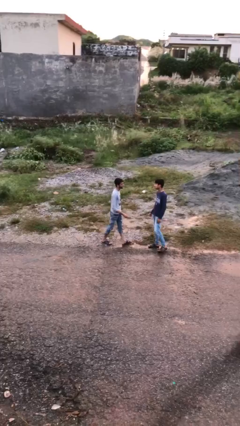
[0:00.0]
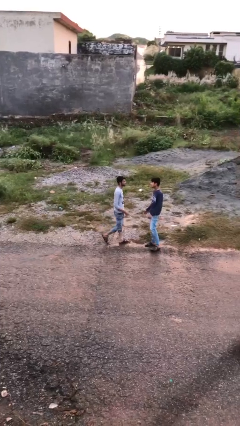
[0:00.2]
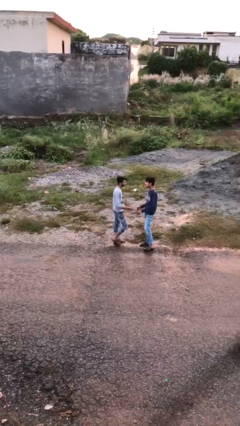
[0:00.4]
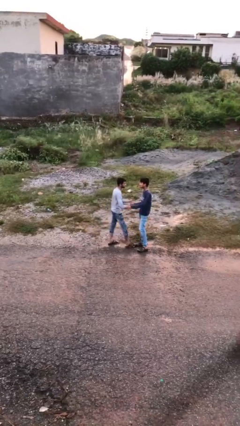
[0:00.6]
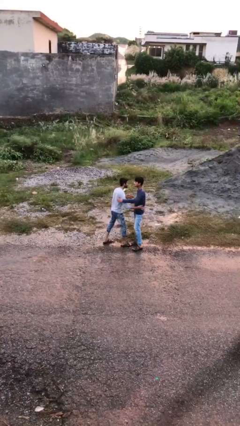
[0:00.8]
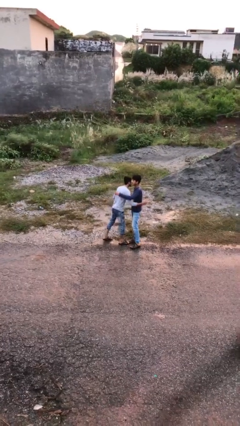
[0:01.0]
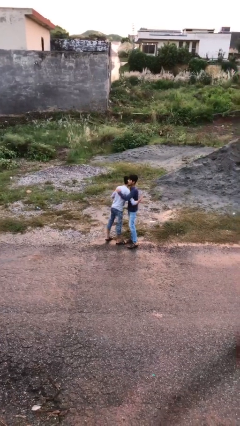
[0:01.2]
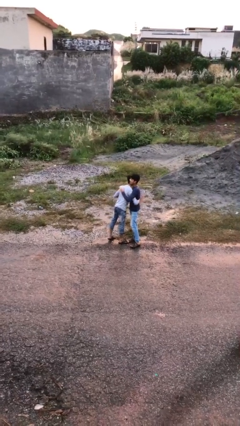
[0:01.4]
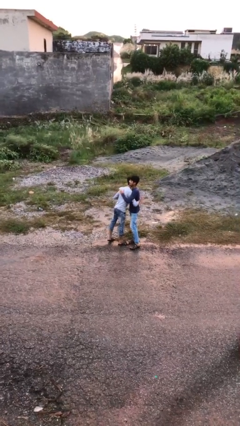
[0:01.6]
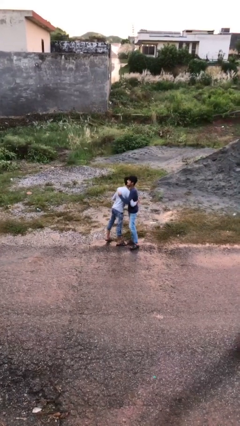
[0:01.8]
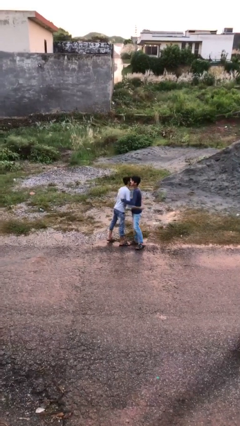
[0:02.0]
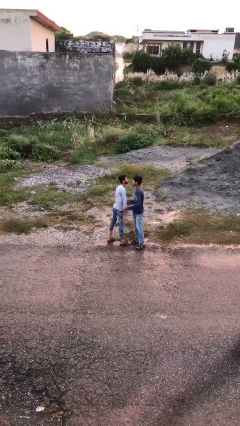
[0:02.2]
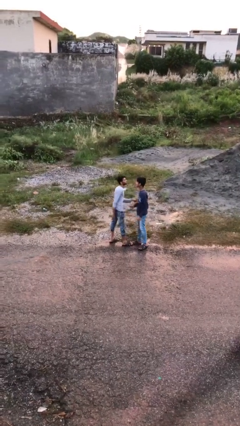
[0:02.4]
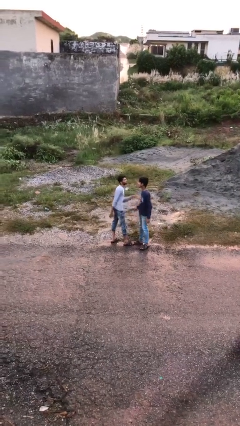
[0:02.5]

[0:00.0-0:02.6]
person embraces person

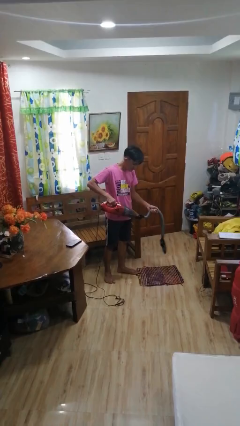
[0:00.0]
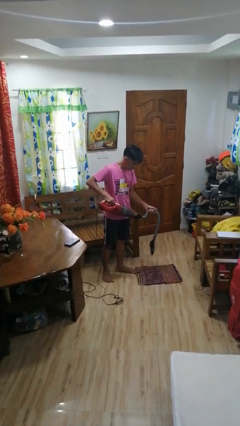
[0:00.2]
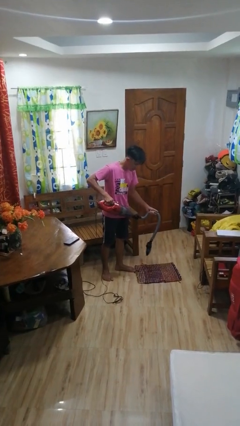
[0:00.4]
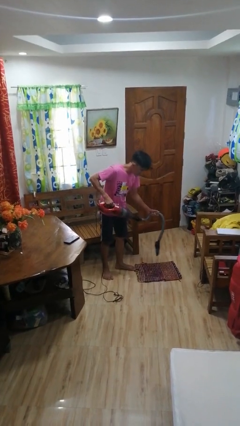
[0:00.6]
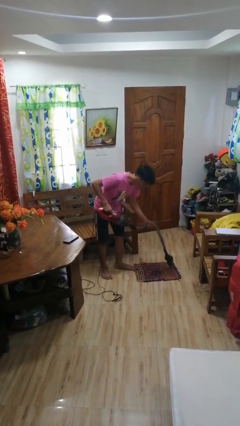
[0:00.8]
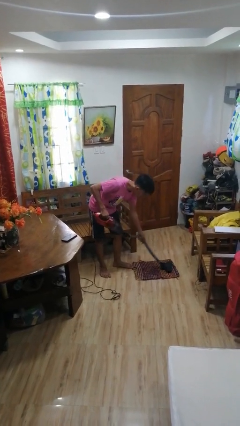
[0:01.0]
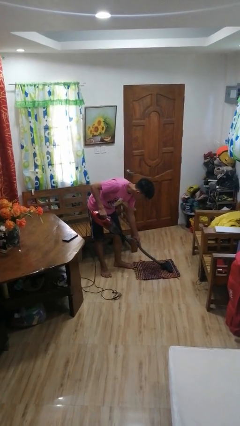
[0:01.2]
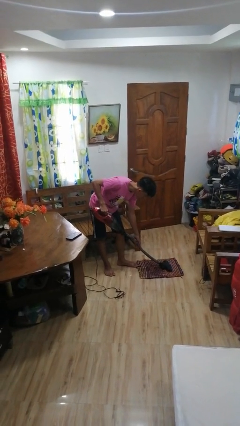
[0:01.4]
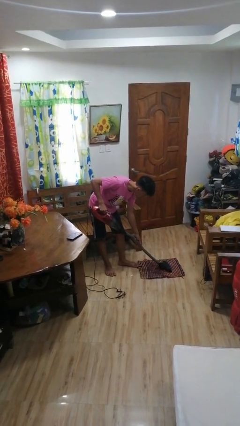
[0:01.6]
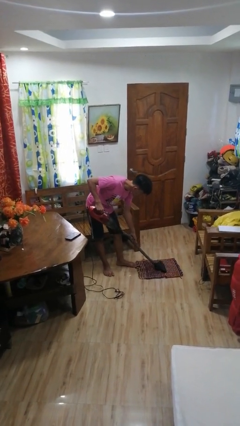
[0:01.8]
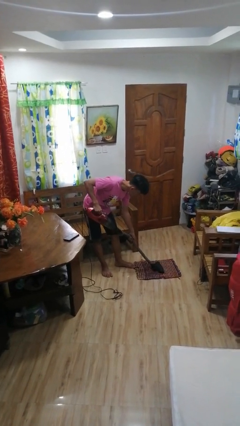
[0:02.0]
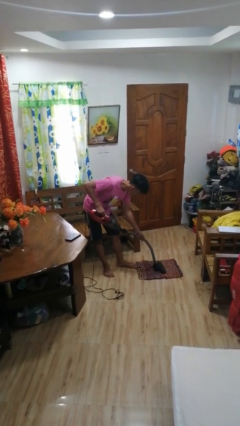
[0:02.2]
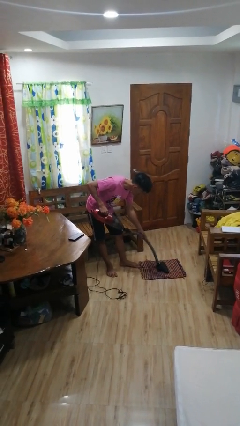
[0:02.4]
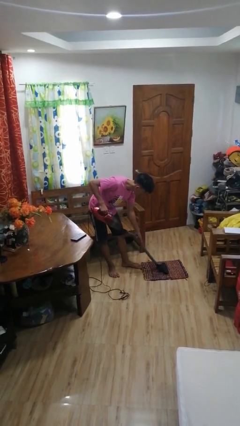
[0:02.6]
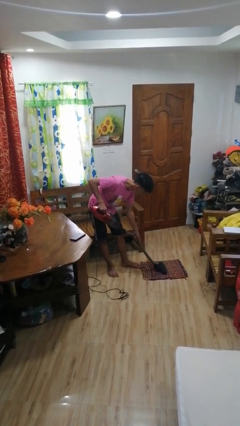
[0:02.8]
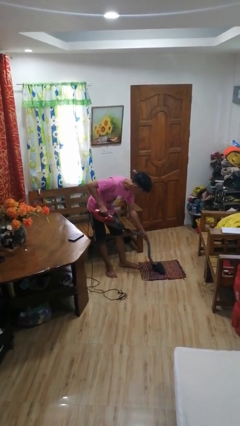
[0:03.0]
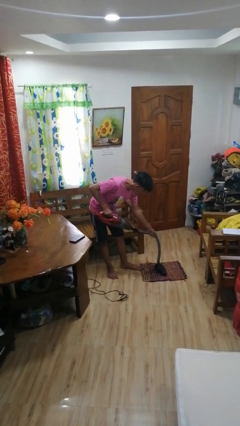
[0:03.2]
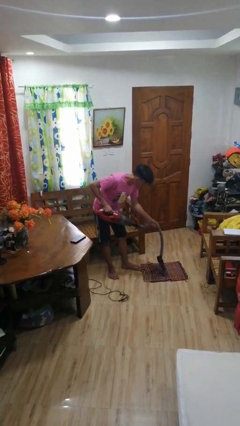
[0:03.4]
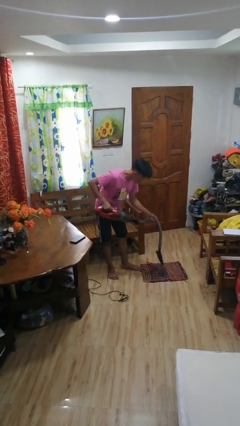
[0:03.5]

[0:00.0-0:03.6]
person vacuums carpet

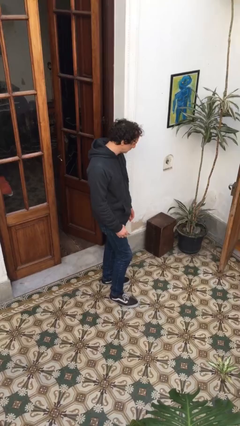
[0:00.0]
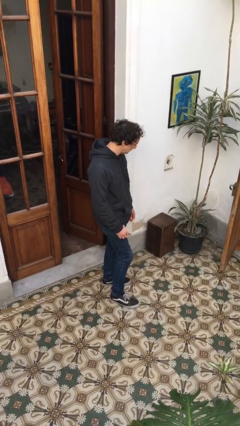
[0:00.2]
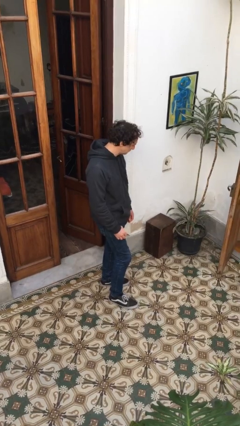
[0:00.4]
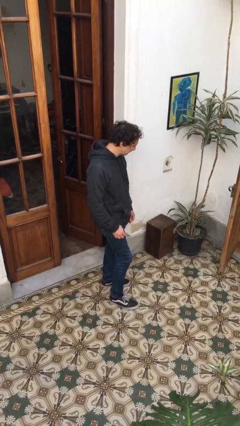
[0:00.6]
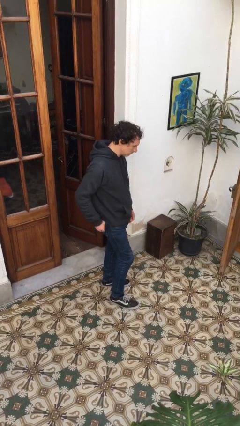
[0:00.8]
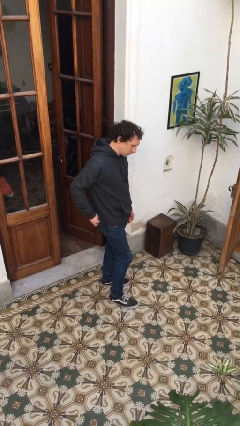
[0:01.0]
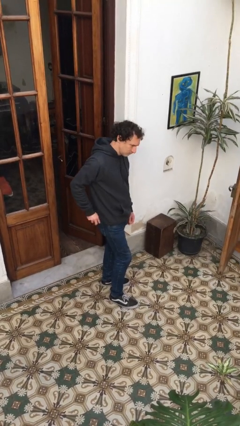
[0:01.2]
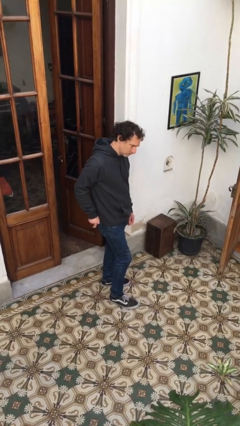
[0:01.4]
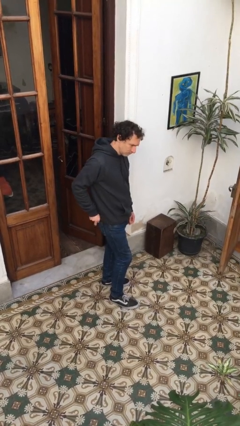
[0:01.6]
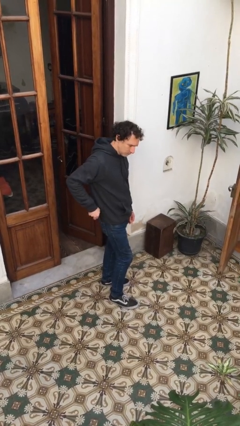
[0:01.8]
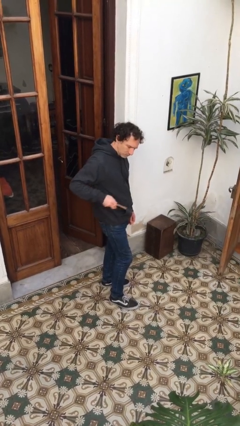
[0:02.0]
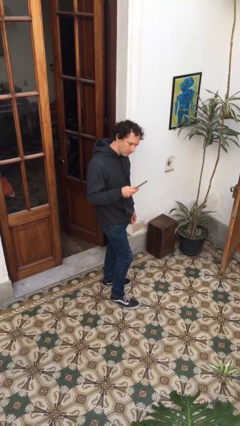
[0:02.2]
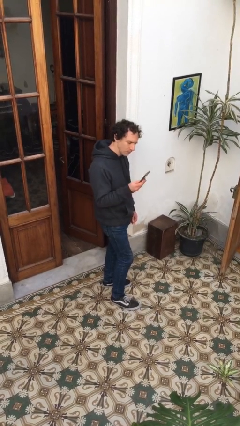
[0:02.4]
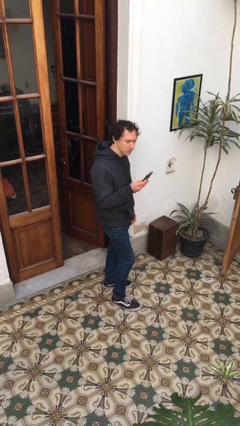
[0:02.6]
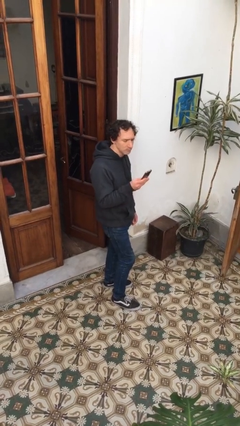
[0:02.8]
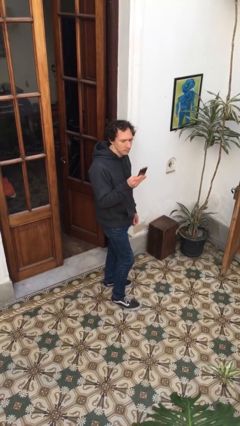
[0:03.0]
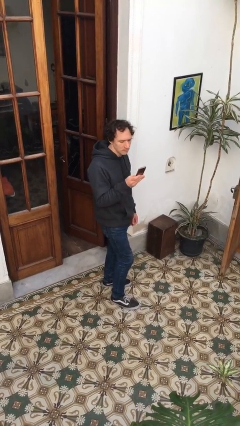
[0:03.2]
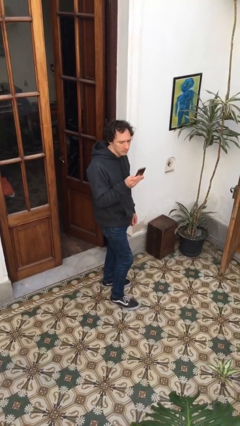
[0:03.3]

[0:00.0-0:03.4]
person takes phone from pocket

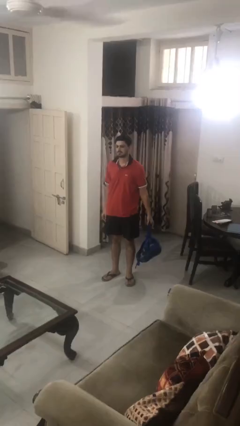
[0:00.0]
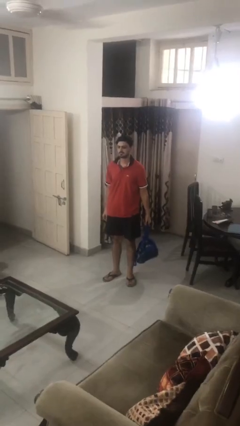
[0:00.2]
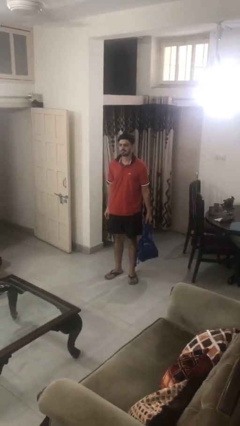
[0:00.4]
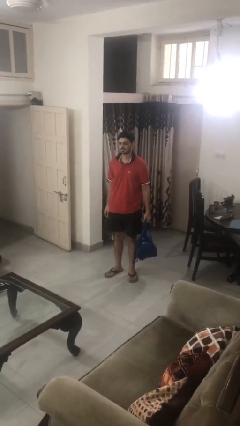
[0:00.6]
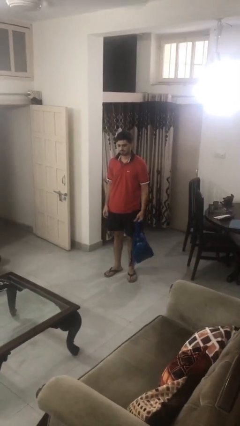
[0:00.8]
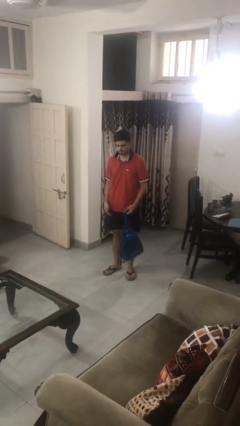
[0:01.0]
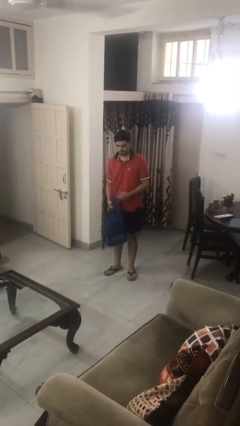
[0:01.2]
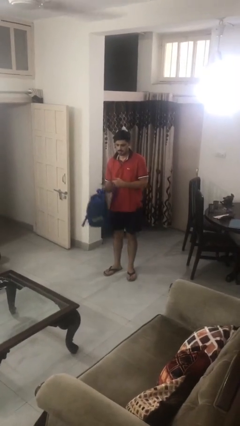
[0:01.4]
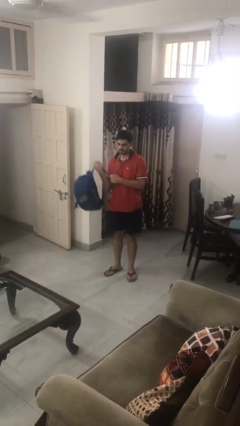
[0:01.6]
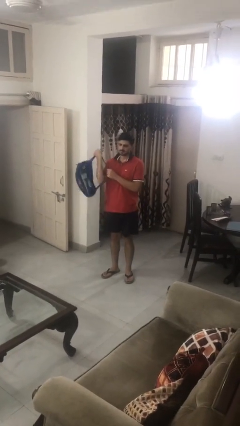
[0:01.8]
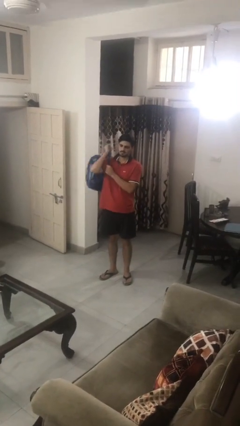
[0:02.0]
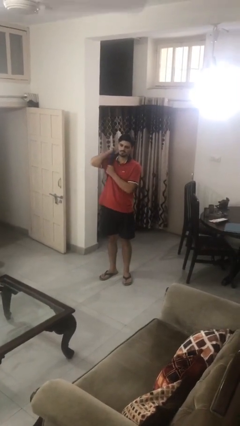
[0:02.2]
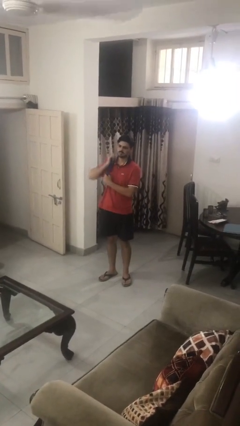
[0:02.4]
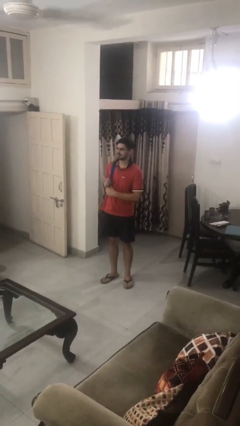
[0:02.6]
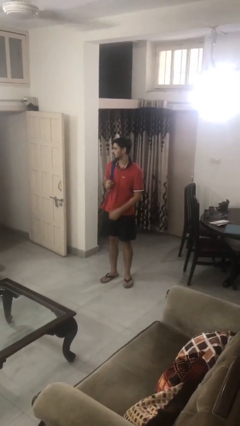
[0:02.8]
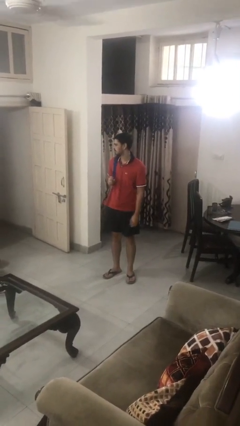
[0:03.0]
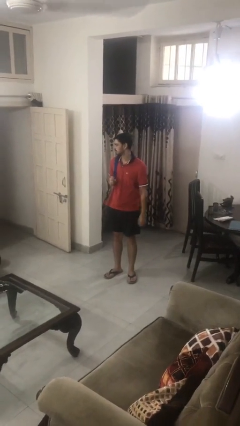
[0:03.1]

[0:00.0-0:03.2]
person puts on backpack

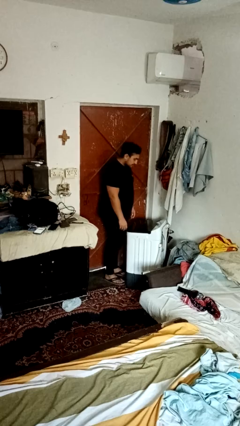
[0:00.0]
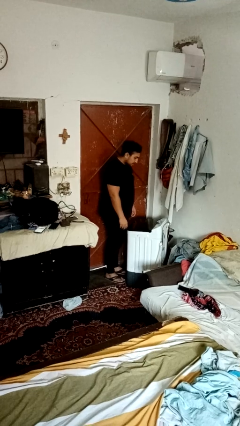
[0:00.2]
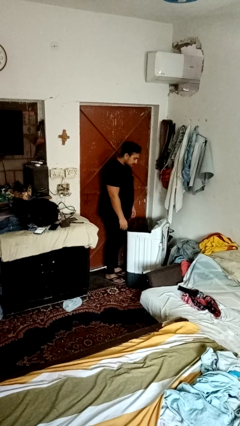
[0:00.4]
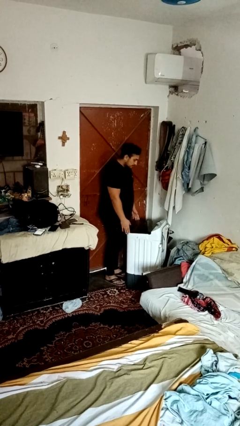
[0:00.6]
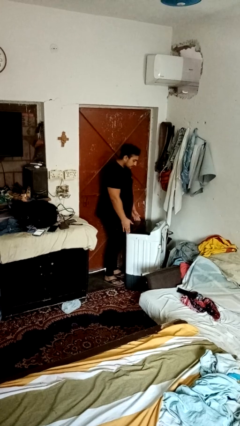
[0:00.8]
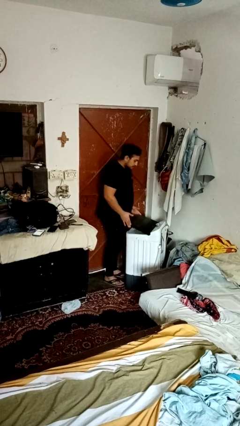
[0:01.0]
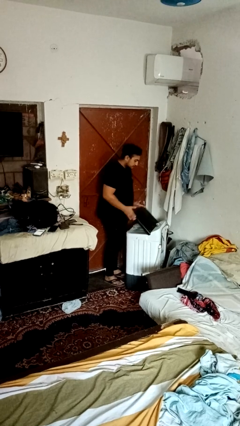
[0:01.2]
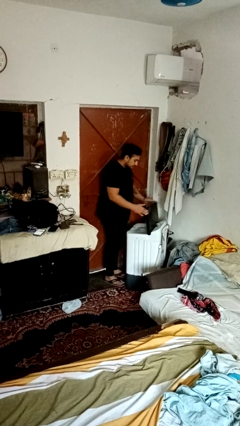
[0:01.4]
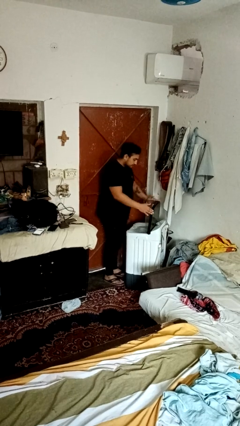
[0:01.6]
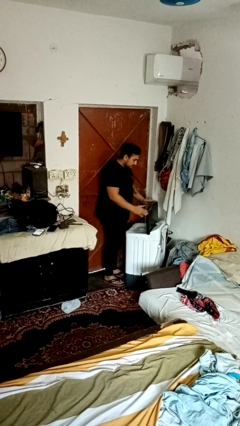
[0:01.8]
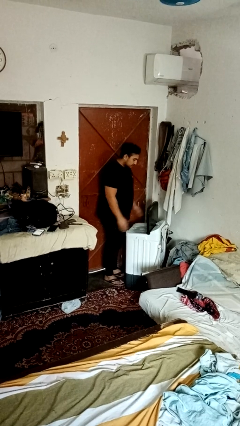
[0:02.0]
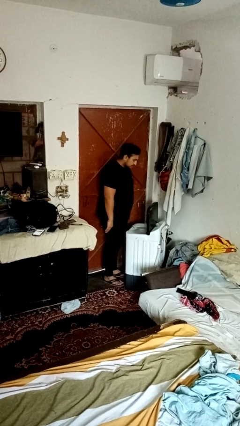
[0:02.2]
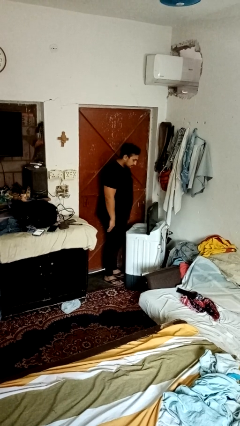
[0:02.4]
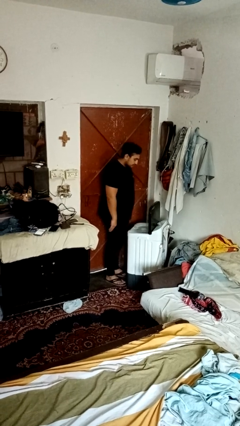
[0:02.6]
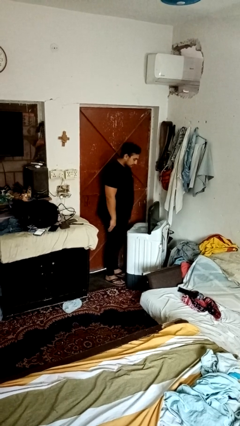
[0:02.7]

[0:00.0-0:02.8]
person opens clothes washer

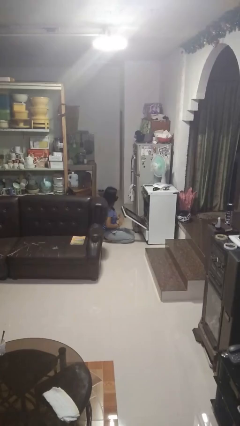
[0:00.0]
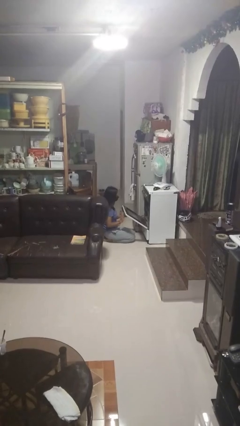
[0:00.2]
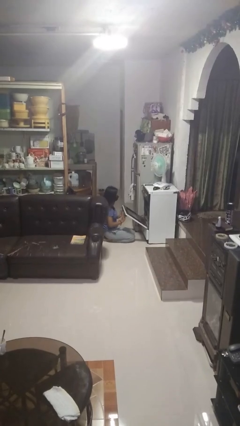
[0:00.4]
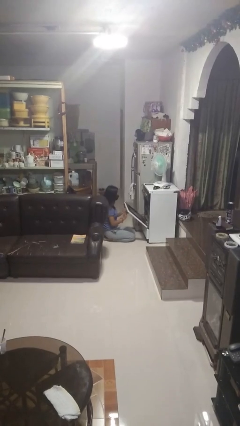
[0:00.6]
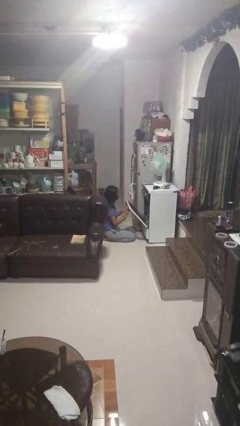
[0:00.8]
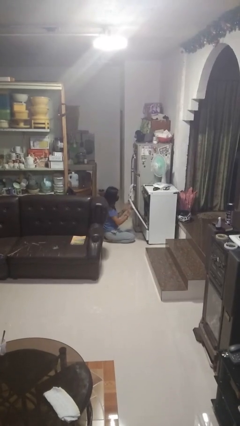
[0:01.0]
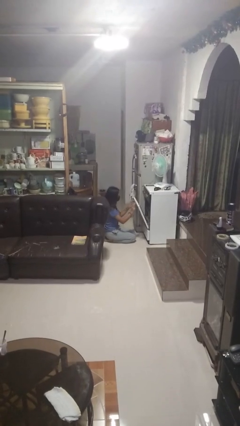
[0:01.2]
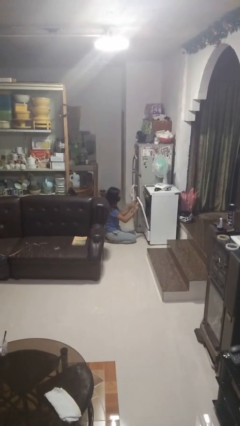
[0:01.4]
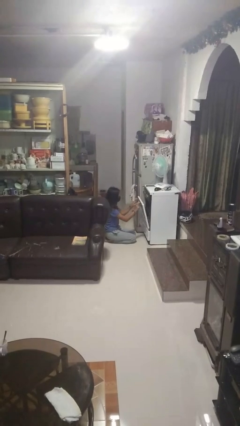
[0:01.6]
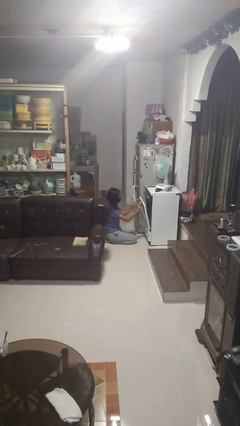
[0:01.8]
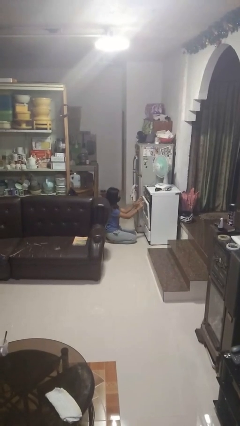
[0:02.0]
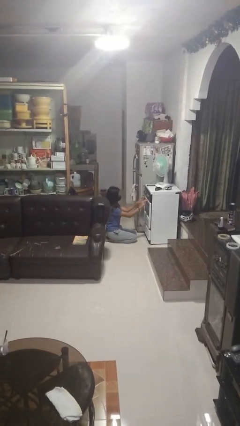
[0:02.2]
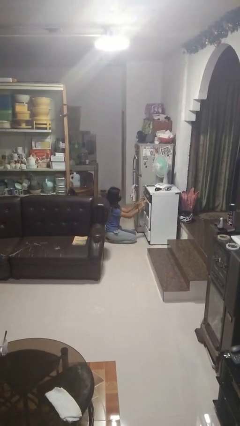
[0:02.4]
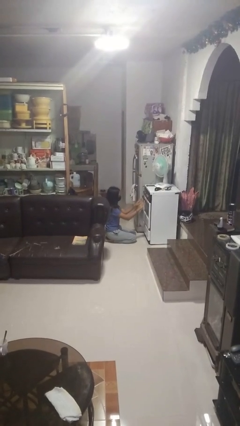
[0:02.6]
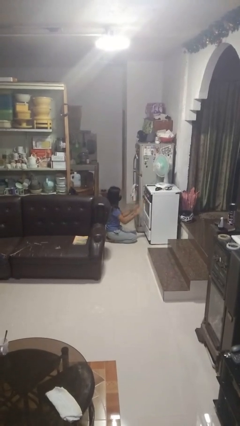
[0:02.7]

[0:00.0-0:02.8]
person closes oven door
